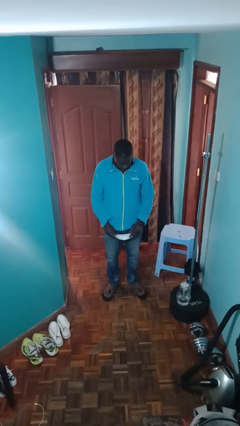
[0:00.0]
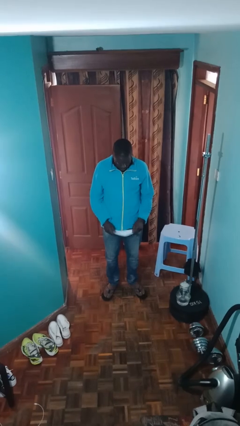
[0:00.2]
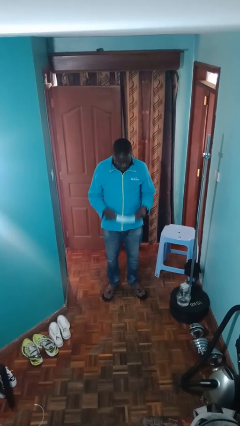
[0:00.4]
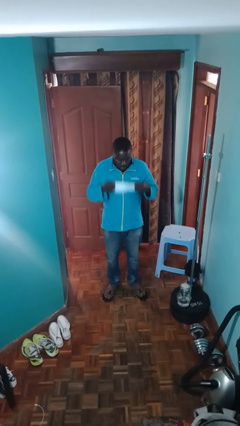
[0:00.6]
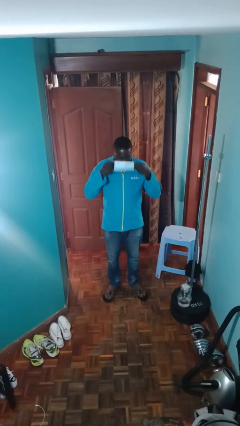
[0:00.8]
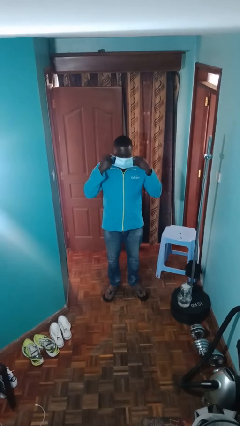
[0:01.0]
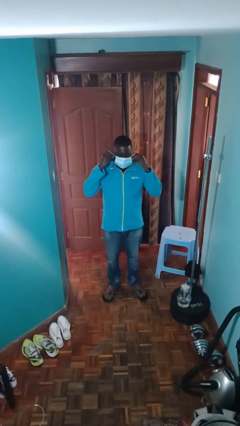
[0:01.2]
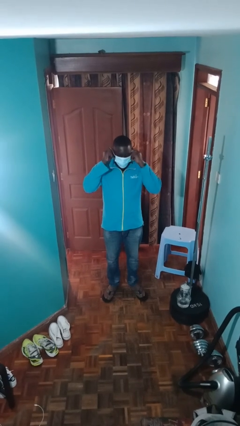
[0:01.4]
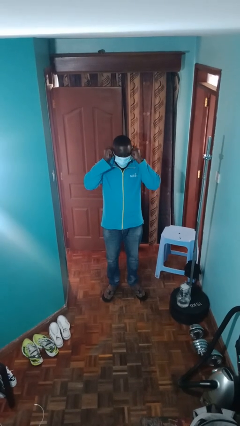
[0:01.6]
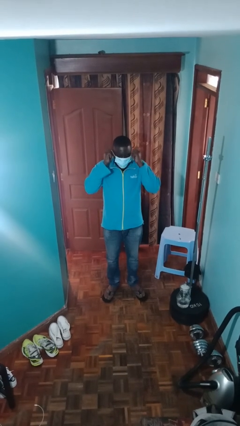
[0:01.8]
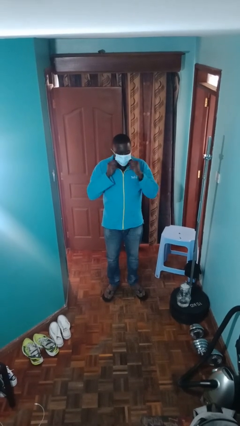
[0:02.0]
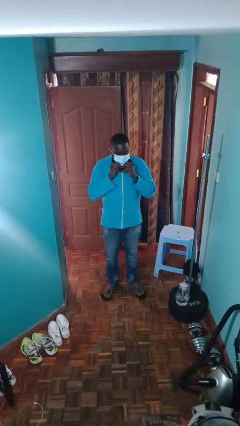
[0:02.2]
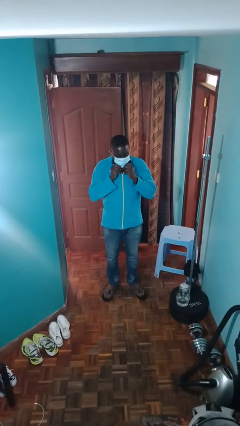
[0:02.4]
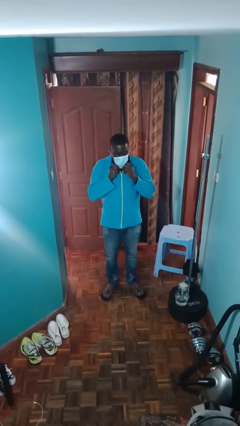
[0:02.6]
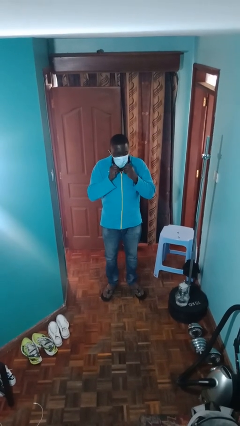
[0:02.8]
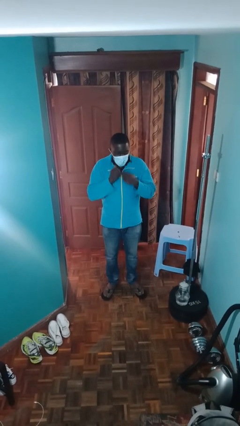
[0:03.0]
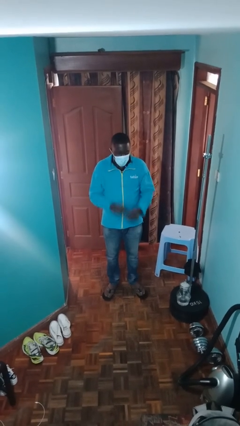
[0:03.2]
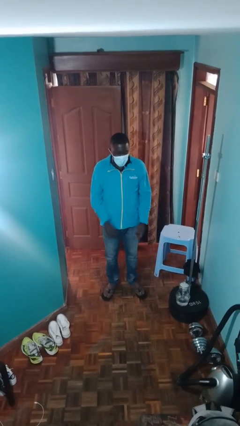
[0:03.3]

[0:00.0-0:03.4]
person puts on facemask

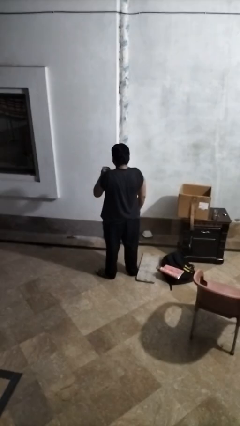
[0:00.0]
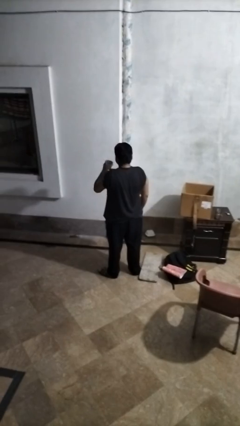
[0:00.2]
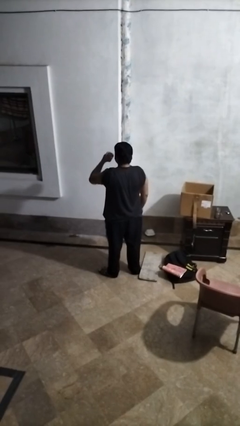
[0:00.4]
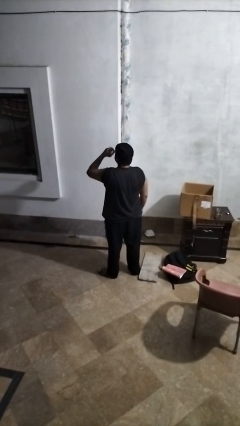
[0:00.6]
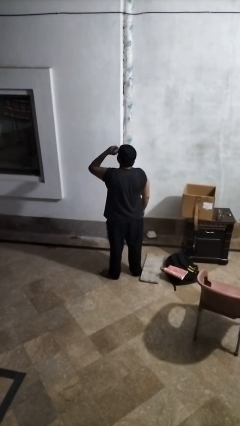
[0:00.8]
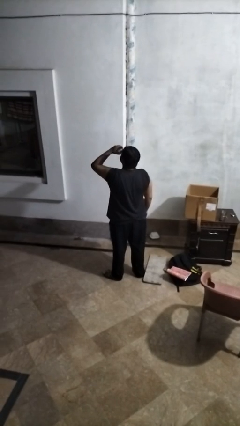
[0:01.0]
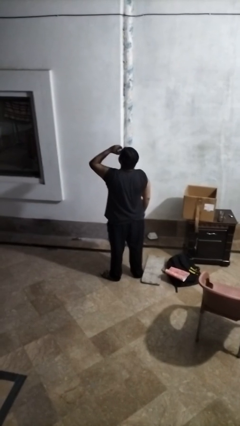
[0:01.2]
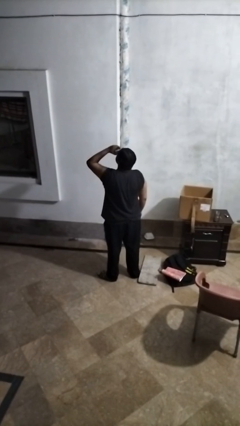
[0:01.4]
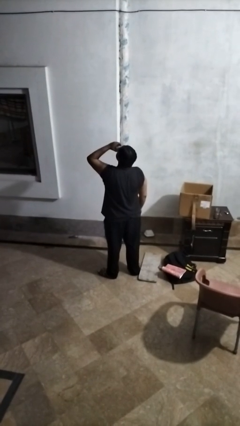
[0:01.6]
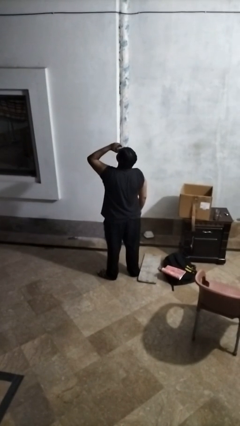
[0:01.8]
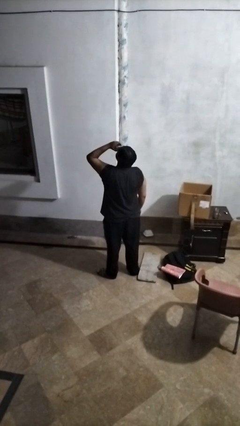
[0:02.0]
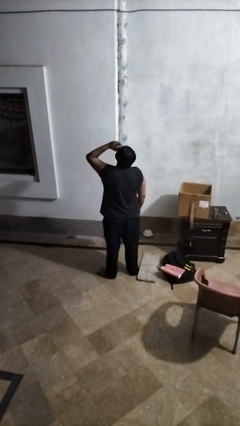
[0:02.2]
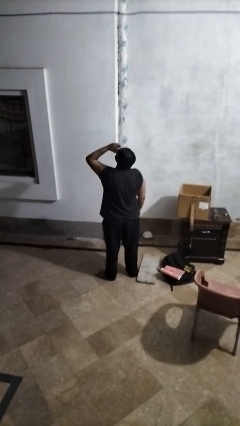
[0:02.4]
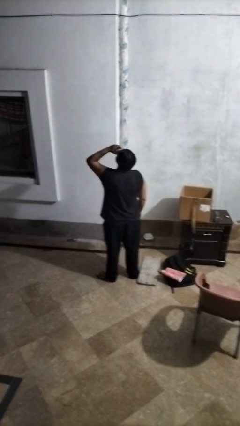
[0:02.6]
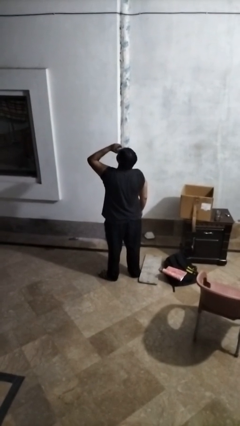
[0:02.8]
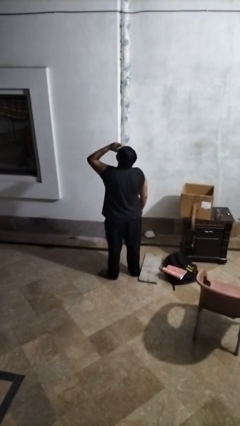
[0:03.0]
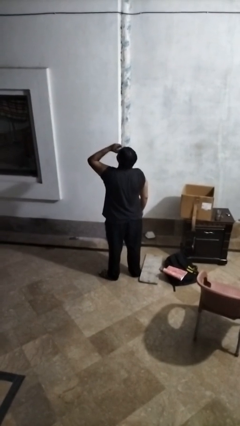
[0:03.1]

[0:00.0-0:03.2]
person drinks from beverage can

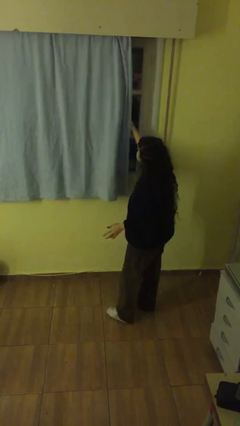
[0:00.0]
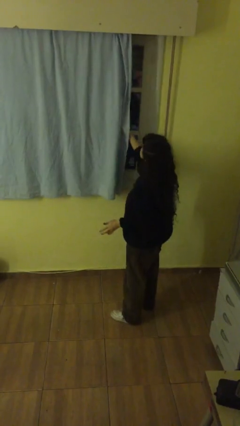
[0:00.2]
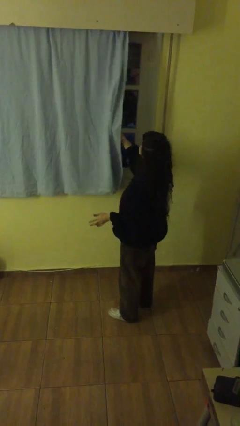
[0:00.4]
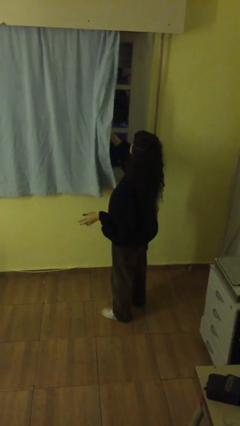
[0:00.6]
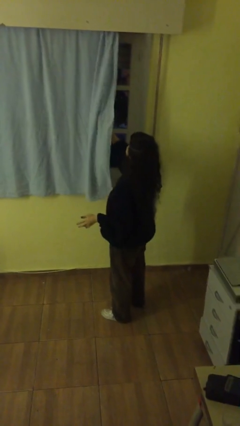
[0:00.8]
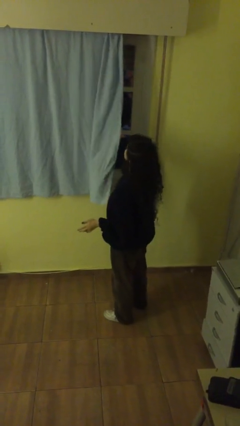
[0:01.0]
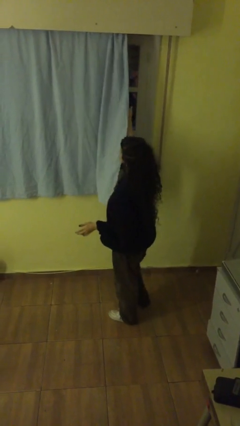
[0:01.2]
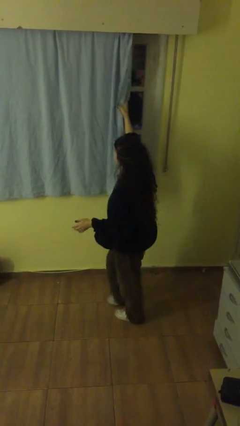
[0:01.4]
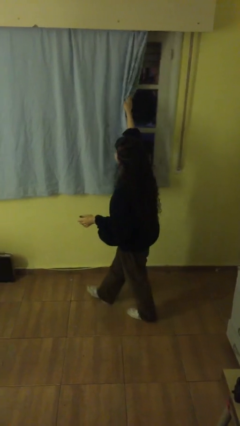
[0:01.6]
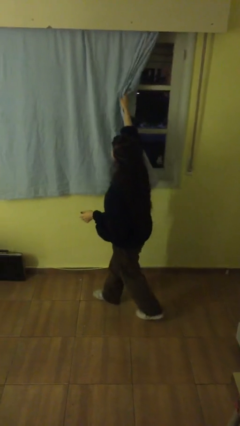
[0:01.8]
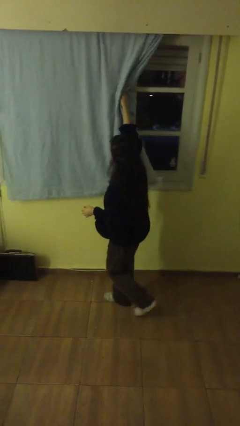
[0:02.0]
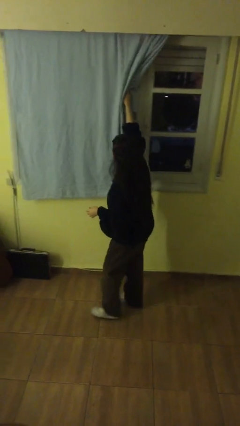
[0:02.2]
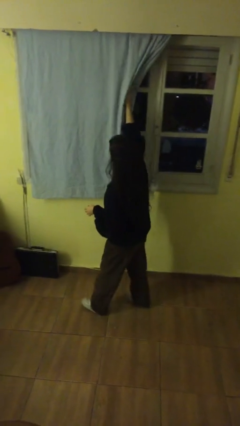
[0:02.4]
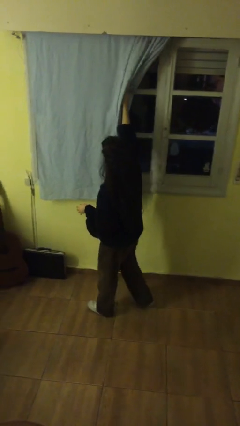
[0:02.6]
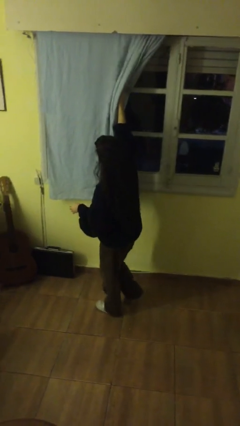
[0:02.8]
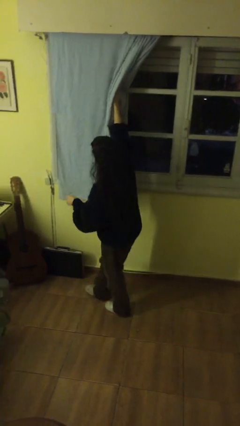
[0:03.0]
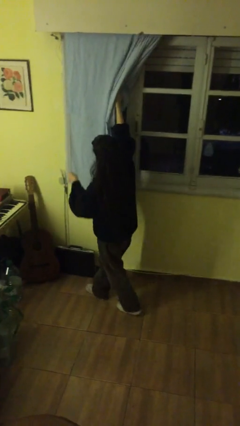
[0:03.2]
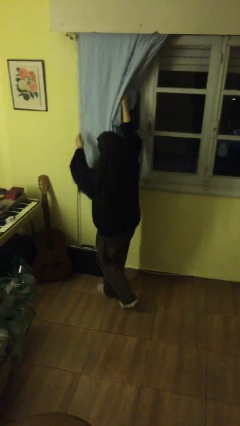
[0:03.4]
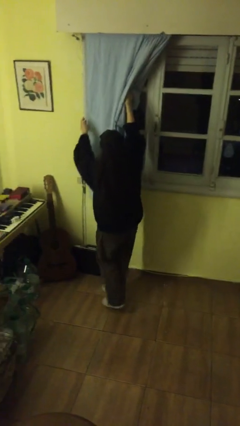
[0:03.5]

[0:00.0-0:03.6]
person opens curtains

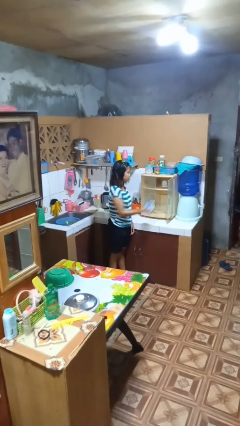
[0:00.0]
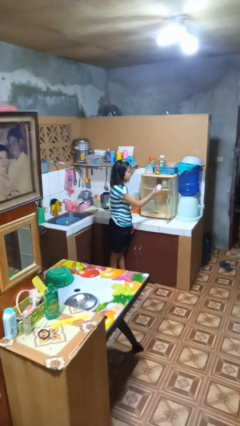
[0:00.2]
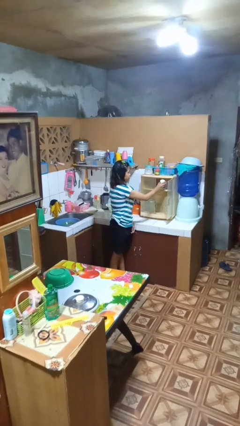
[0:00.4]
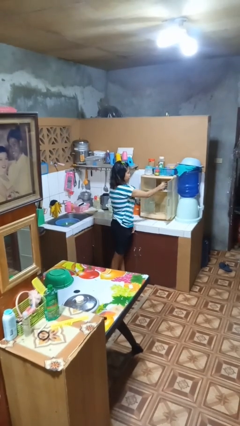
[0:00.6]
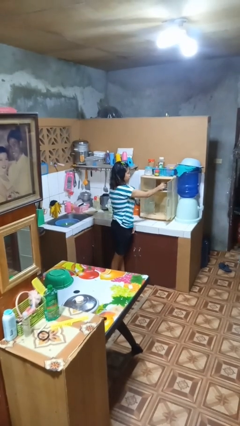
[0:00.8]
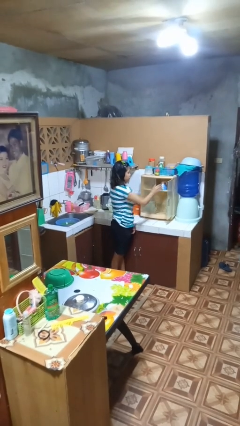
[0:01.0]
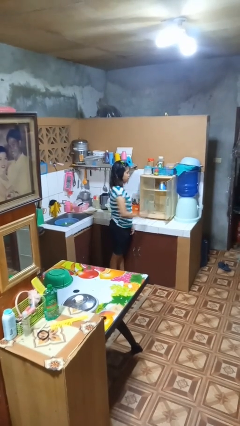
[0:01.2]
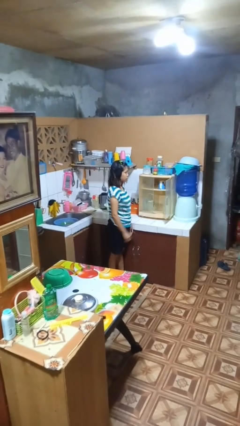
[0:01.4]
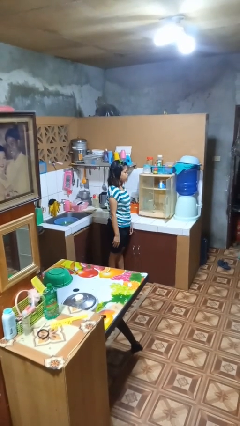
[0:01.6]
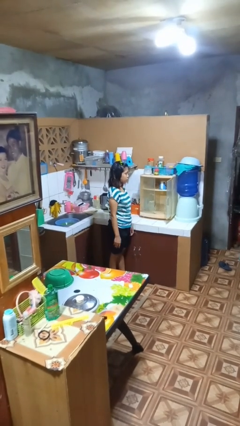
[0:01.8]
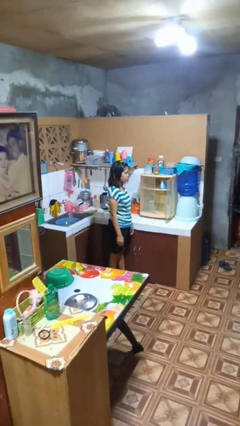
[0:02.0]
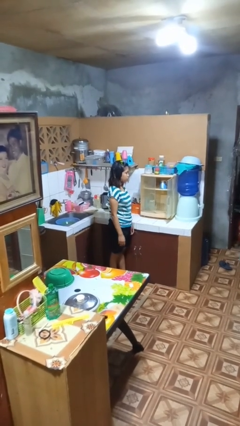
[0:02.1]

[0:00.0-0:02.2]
person puts object in cabinet

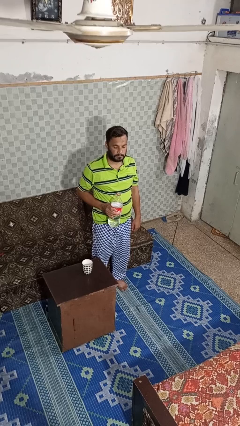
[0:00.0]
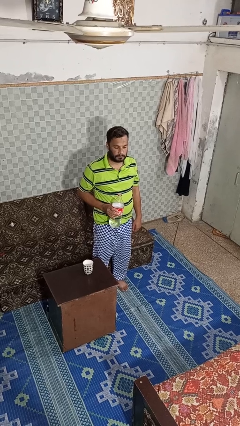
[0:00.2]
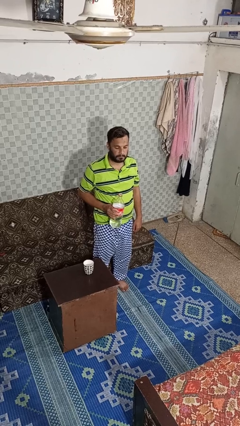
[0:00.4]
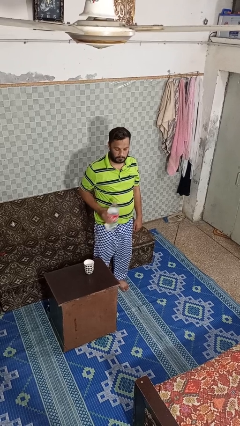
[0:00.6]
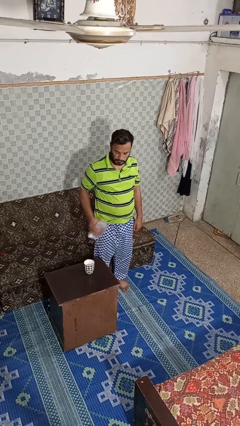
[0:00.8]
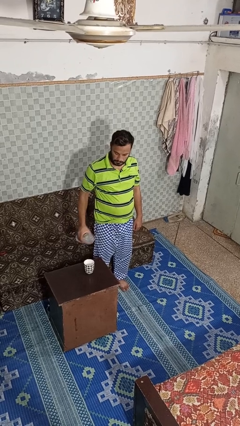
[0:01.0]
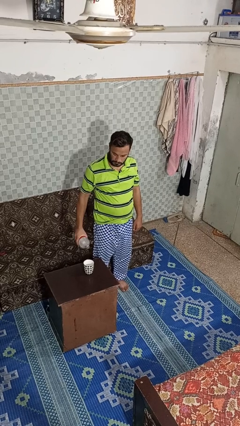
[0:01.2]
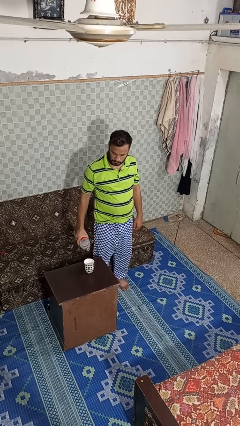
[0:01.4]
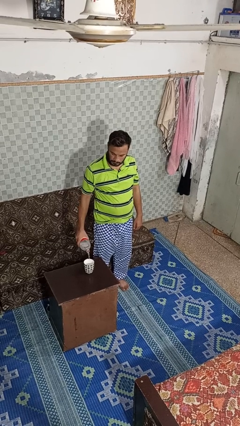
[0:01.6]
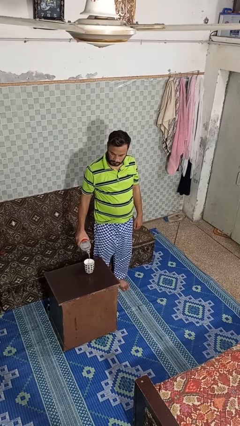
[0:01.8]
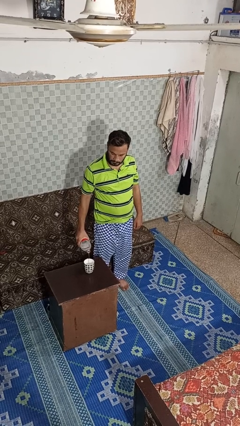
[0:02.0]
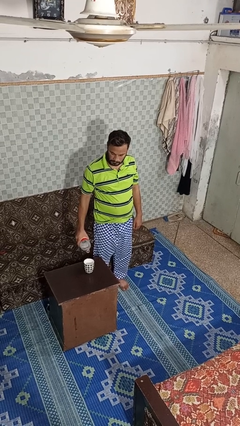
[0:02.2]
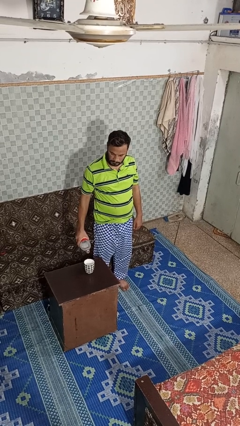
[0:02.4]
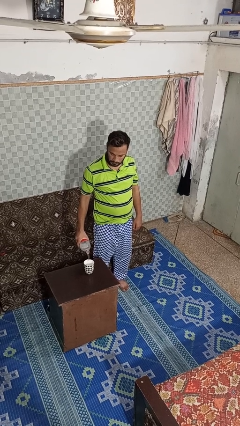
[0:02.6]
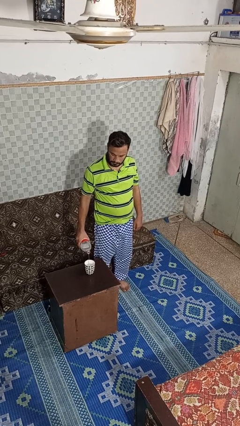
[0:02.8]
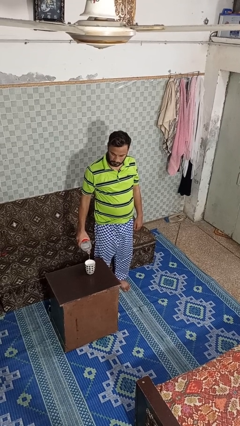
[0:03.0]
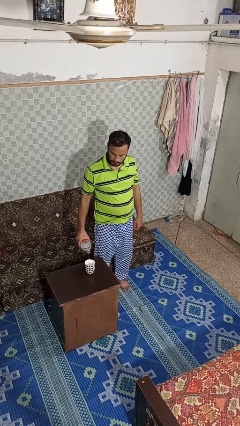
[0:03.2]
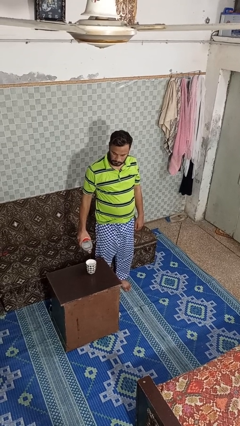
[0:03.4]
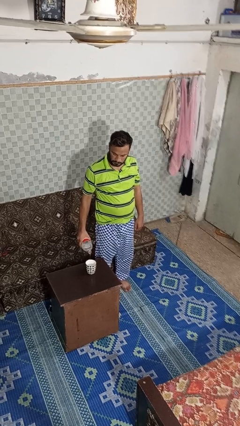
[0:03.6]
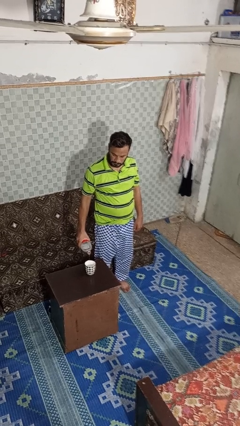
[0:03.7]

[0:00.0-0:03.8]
person pours liquid into cup

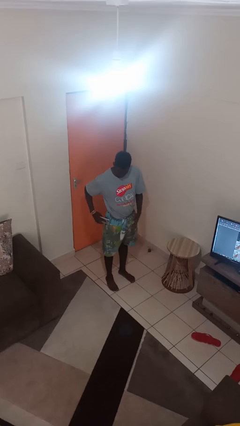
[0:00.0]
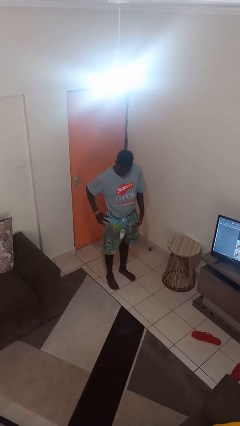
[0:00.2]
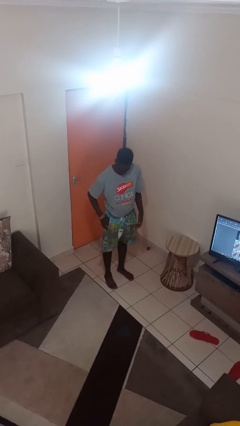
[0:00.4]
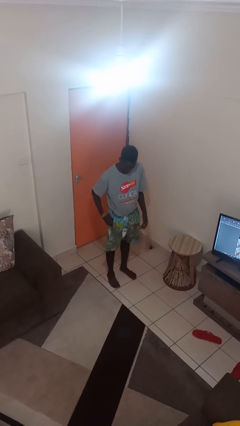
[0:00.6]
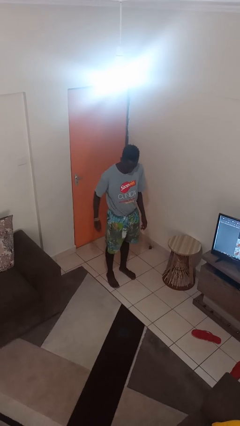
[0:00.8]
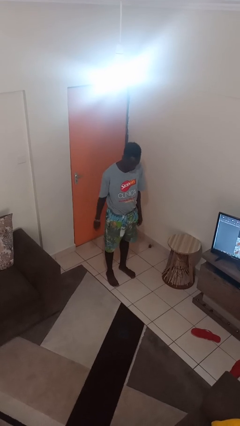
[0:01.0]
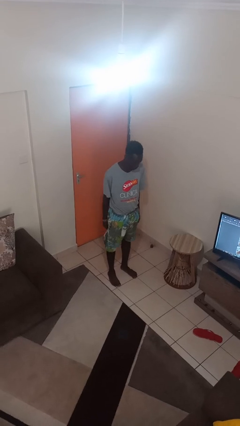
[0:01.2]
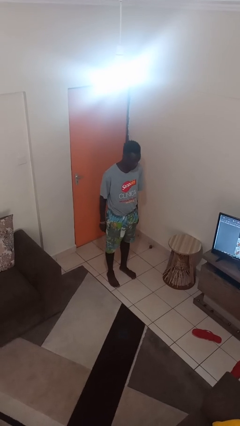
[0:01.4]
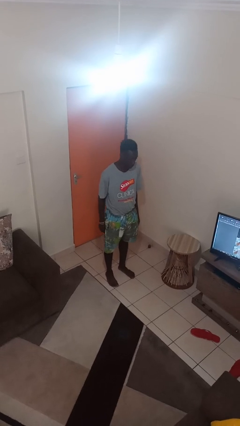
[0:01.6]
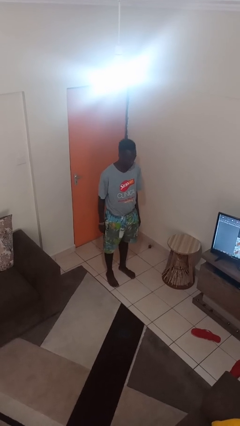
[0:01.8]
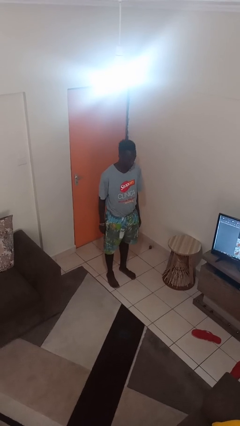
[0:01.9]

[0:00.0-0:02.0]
person puts phone into pocket
